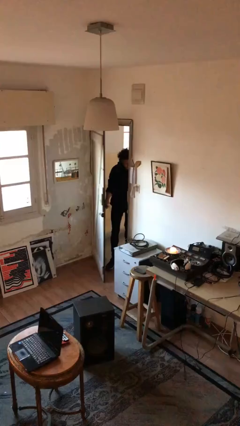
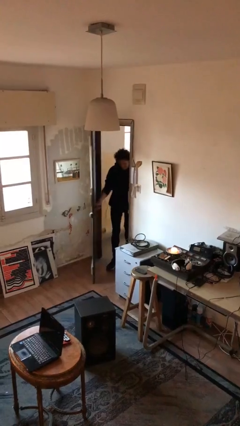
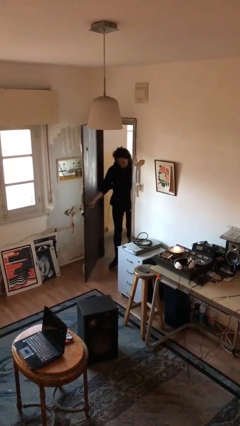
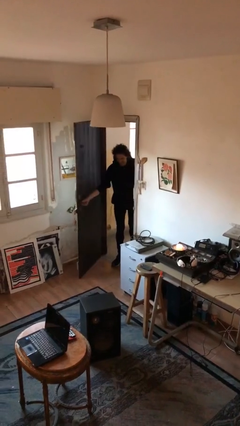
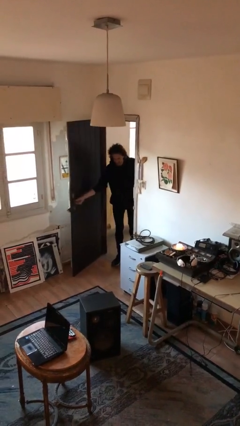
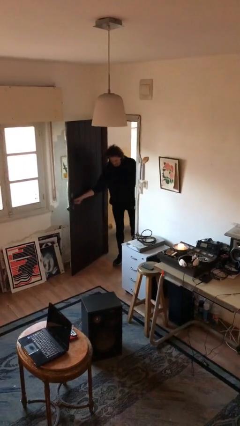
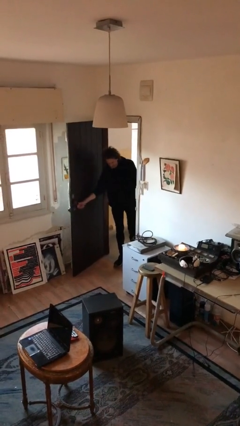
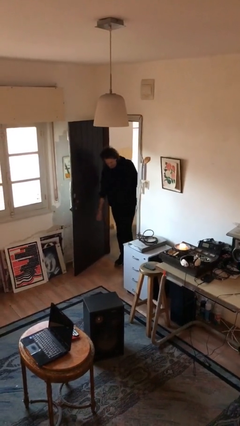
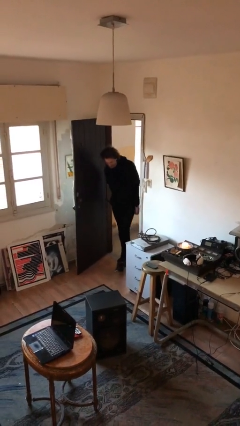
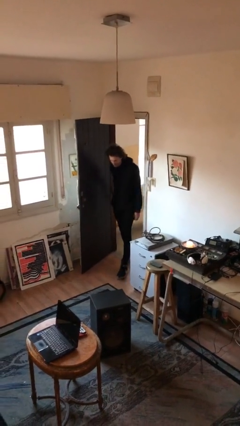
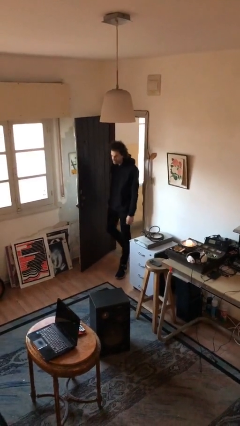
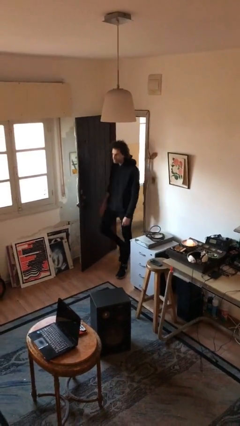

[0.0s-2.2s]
person opens facility door

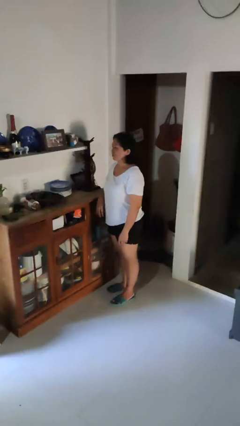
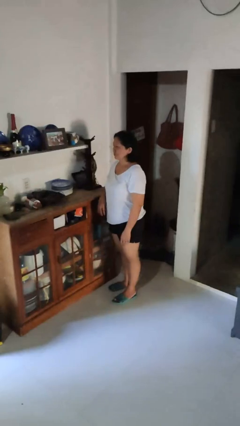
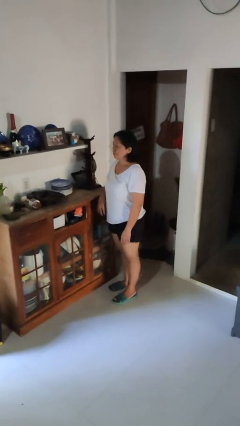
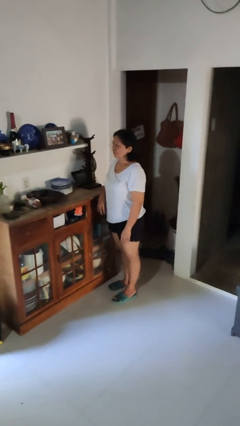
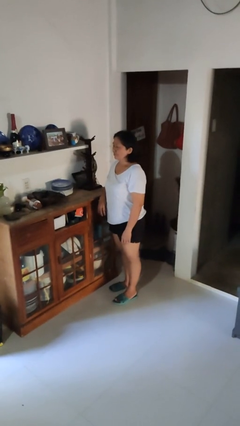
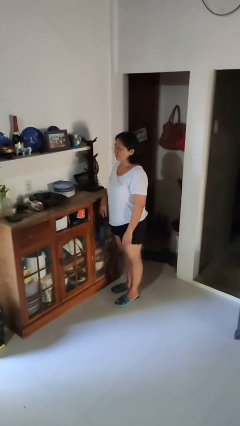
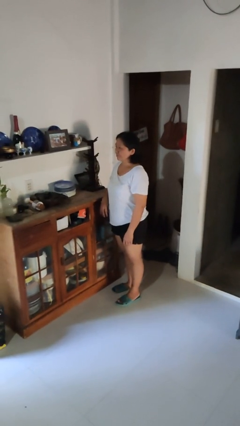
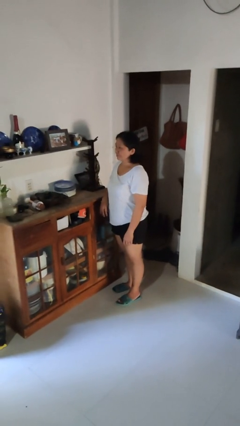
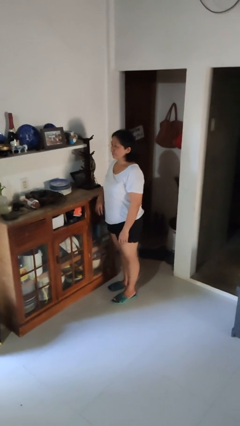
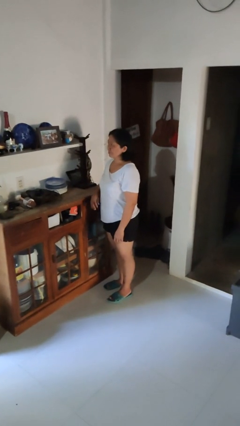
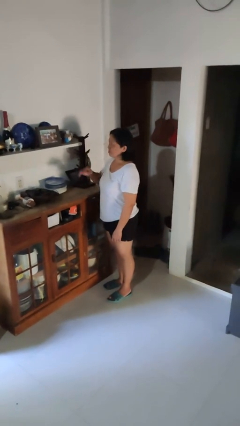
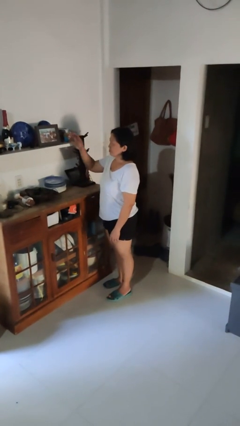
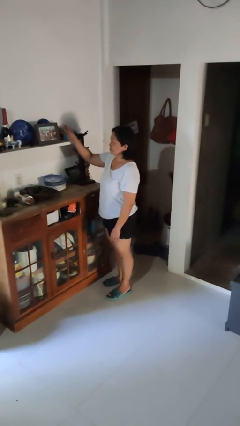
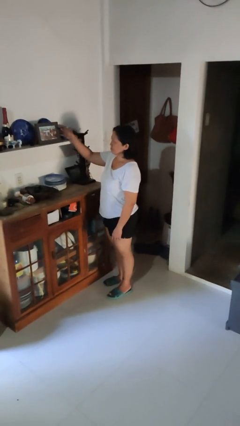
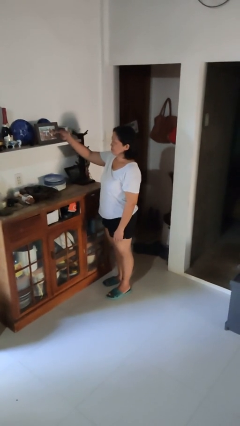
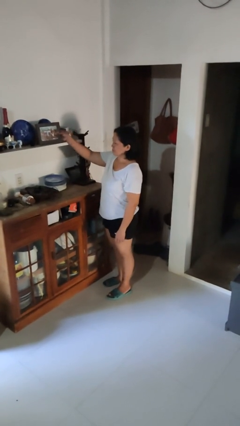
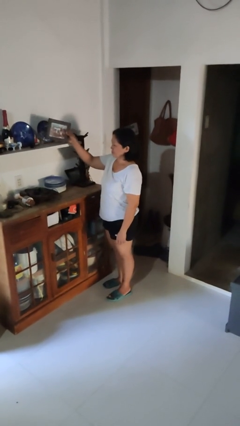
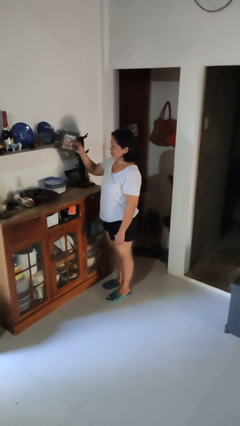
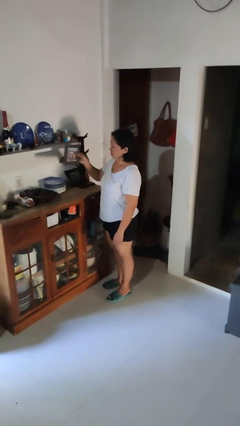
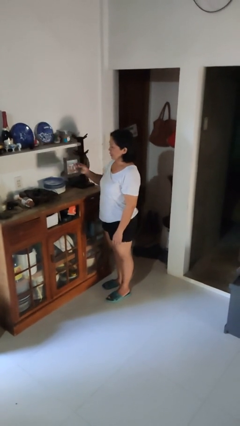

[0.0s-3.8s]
person picks up object from shelf

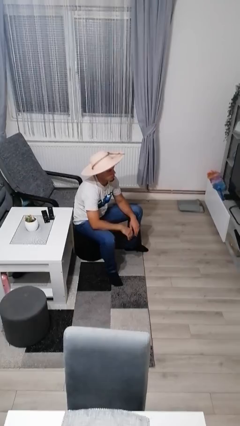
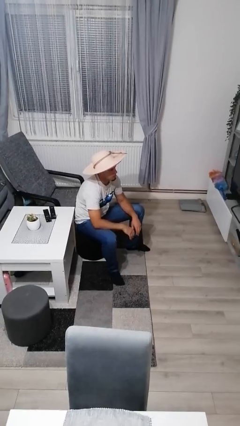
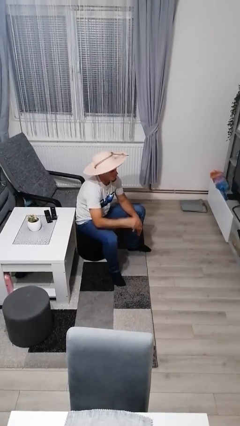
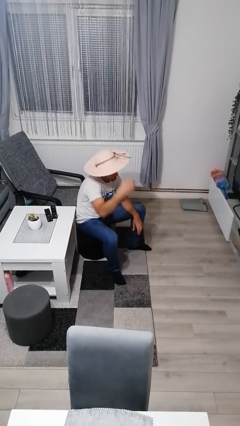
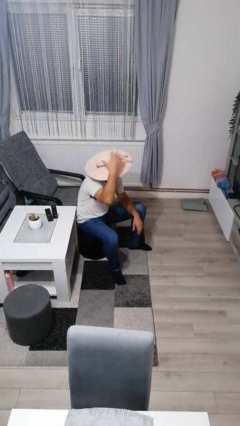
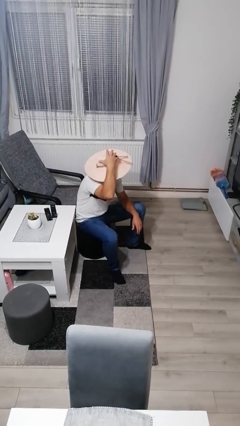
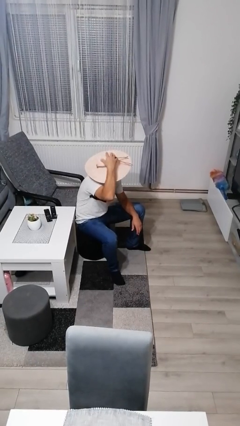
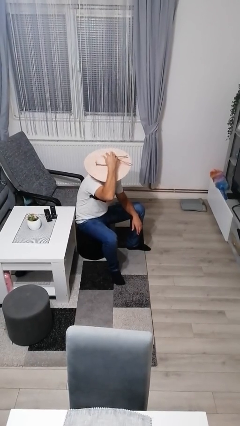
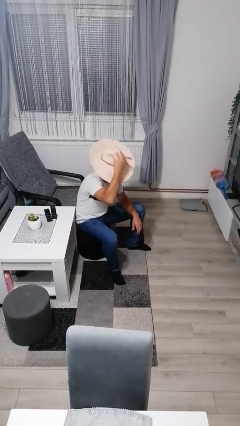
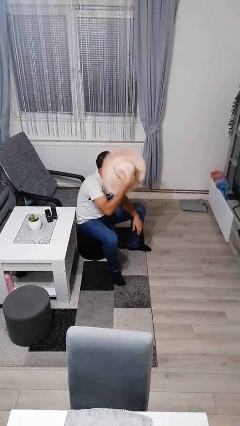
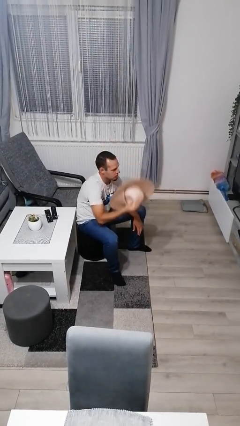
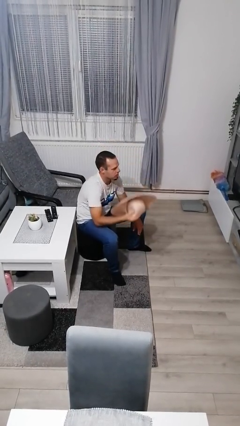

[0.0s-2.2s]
person takes off hat

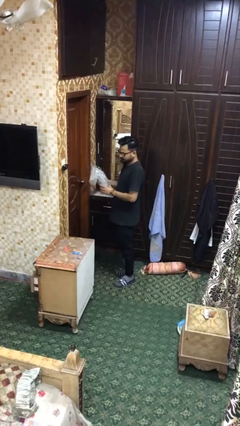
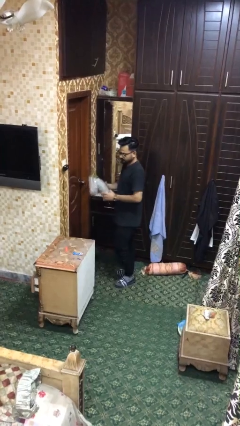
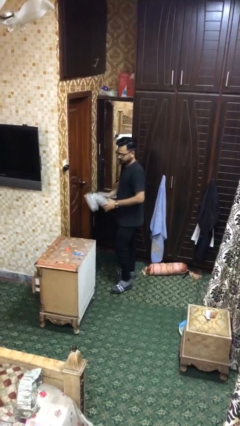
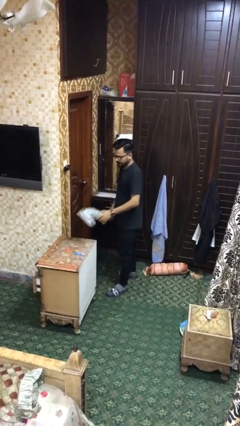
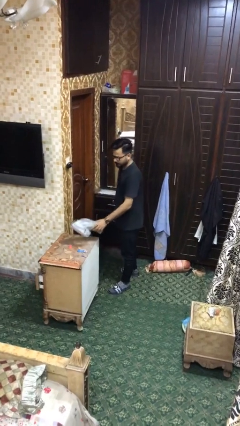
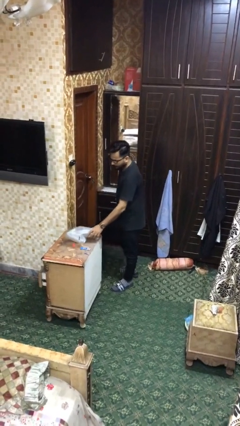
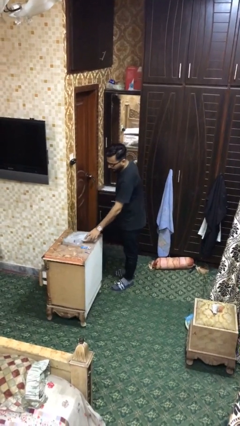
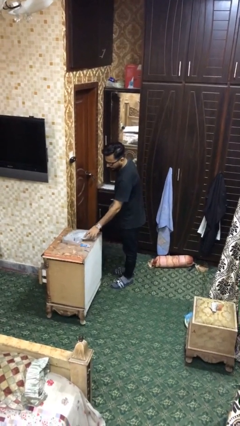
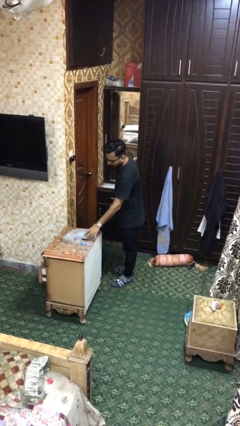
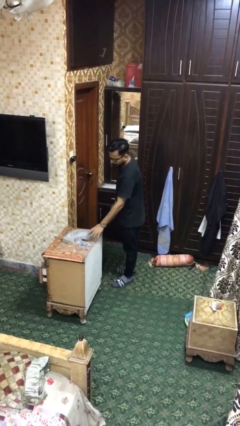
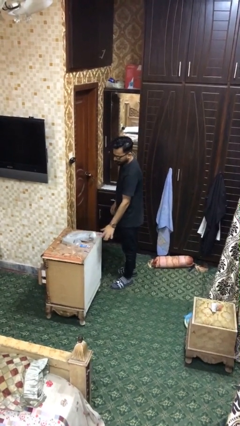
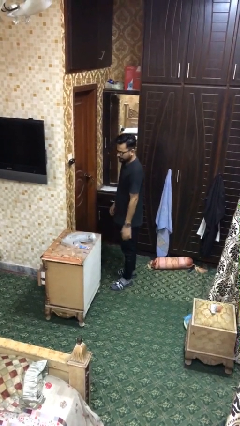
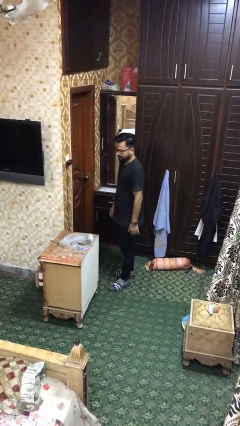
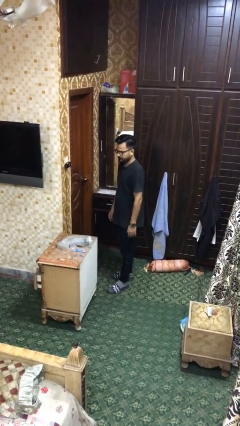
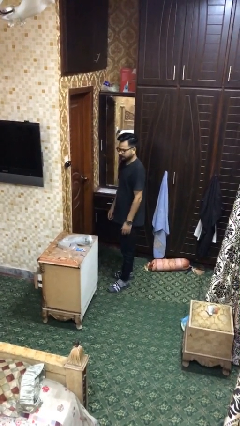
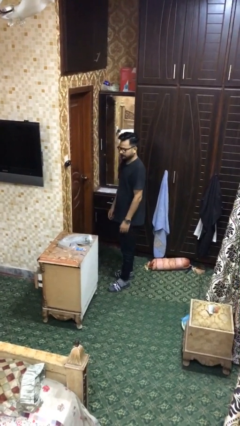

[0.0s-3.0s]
person puts down object on table

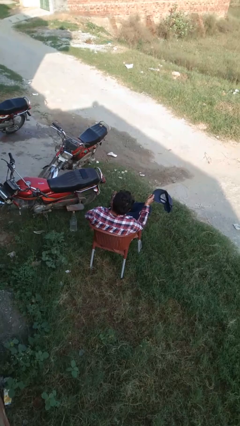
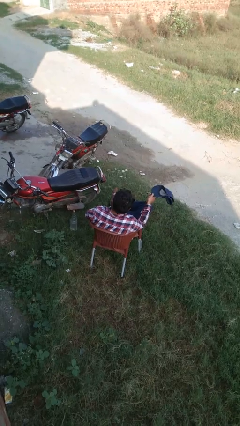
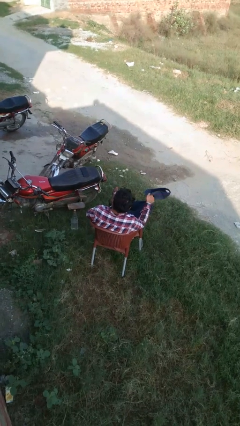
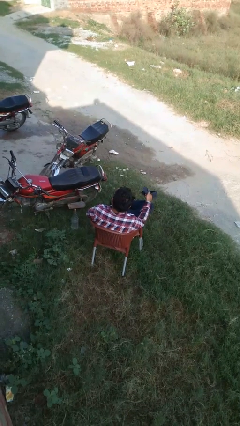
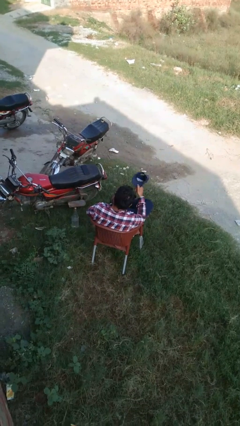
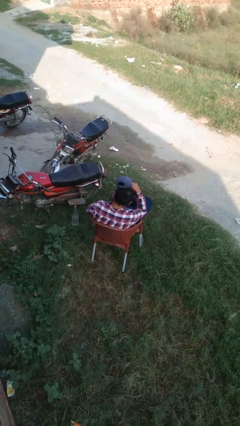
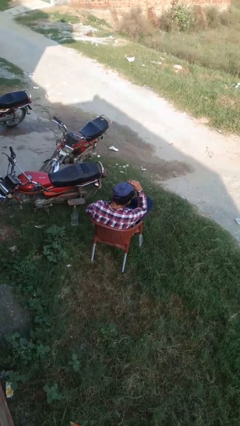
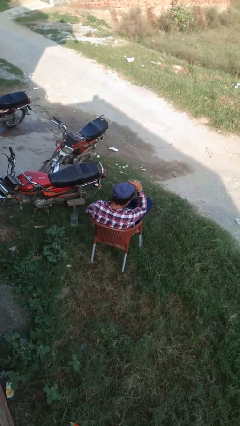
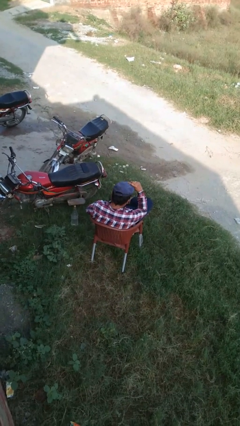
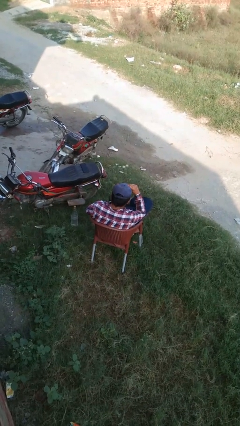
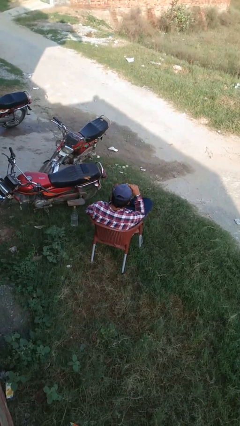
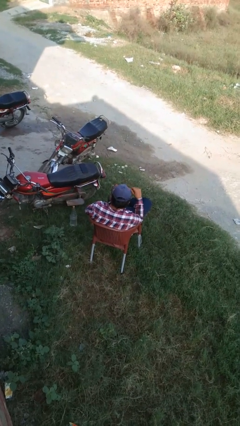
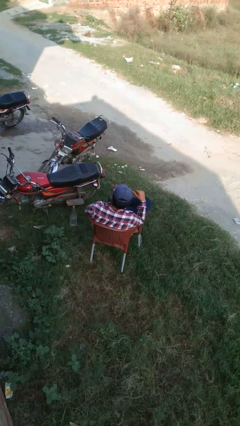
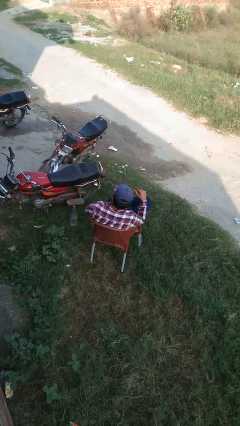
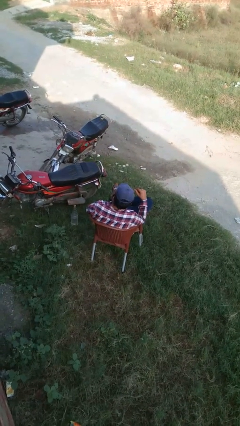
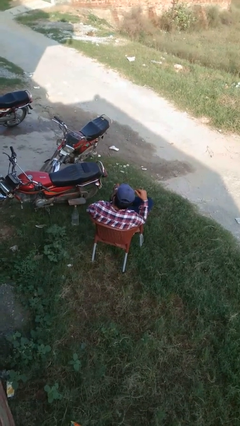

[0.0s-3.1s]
person puts on hat

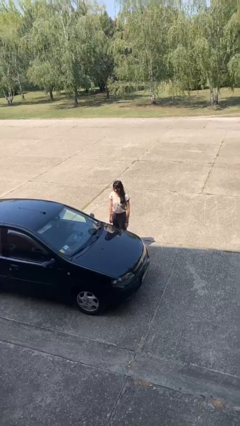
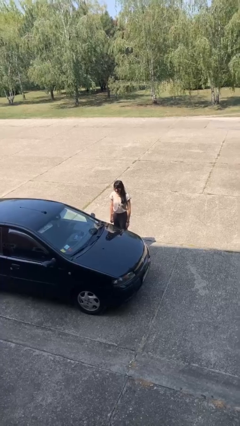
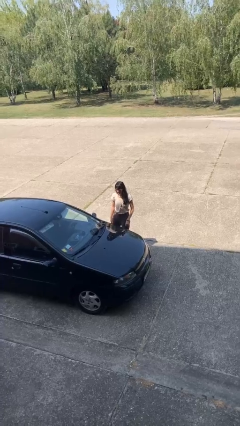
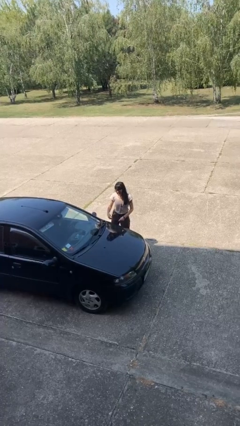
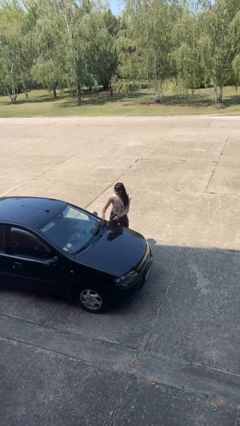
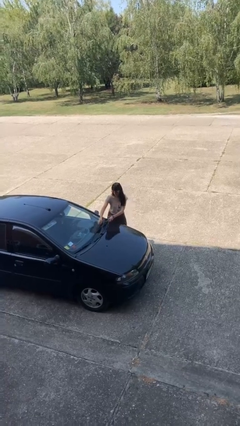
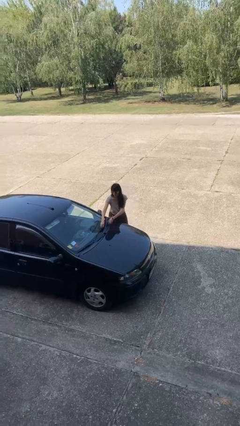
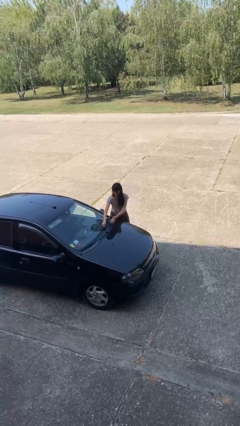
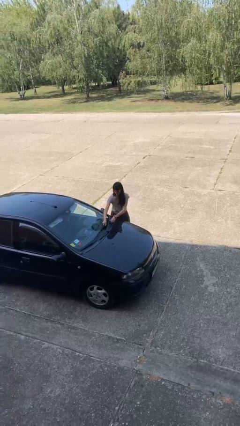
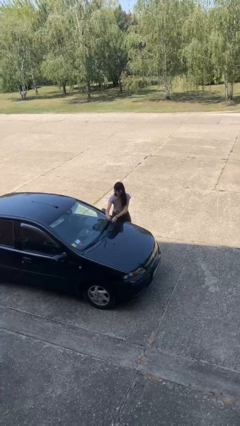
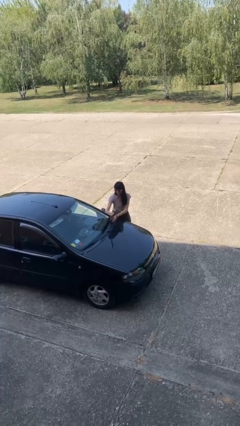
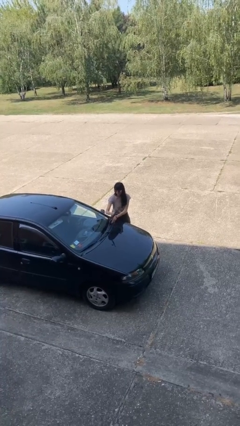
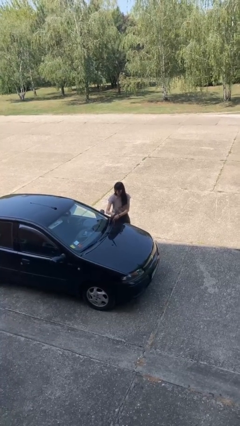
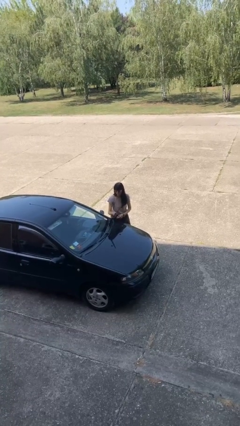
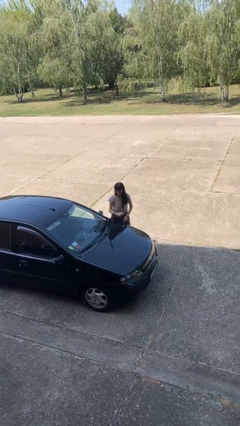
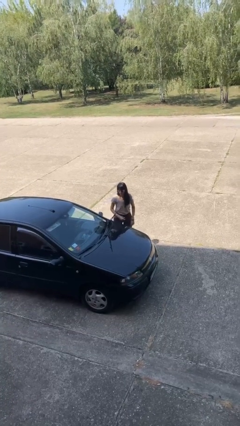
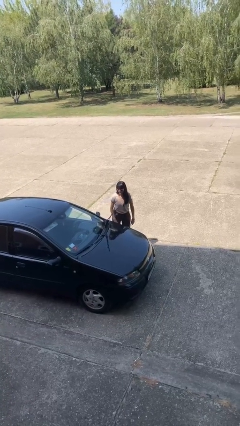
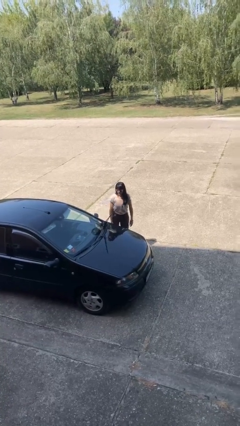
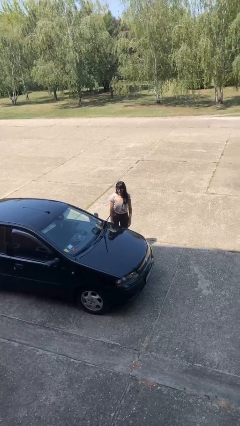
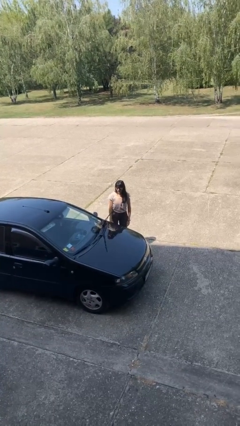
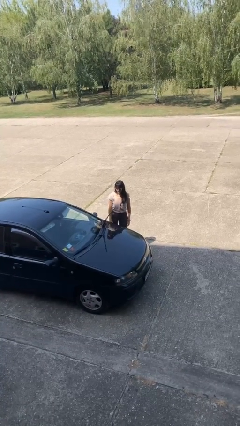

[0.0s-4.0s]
person flips up car wipers
